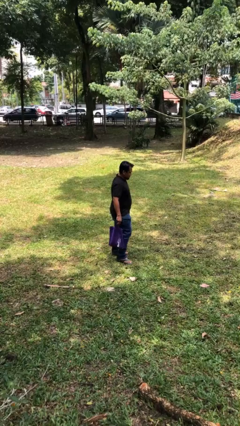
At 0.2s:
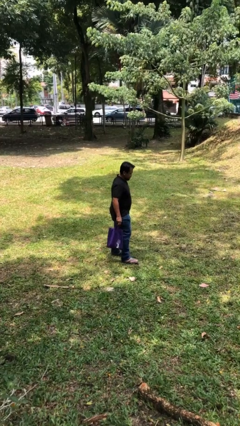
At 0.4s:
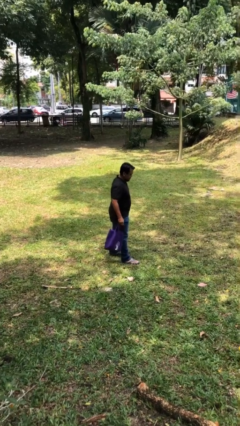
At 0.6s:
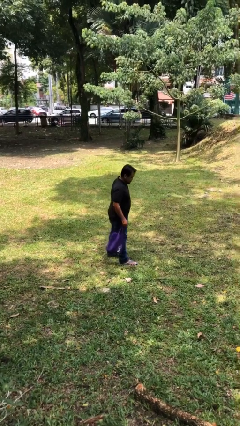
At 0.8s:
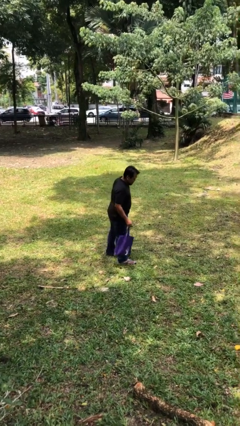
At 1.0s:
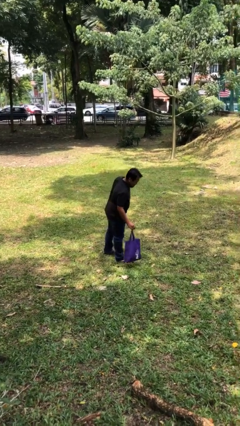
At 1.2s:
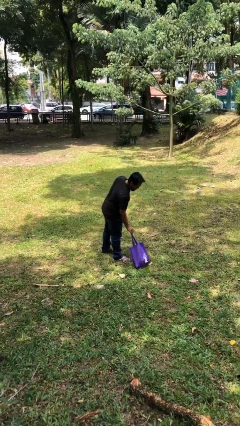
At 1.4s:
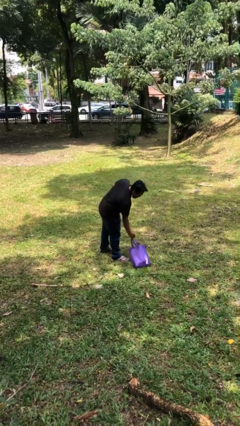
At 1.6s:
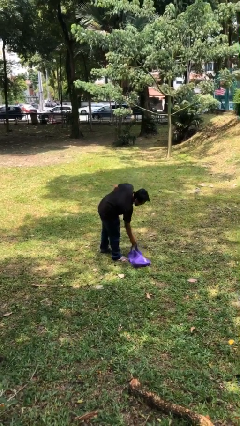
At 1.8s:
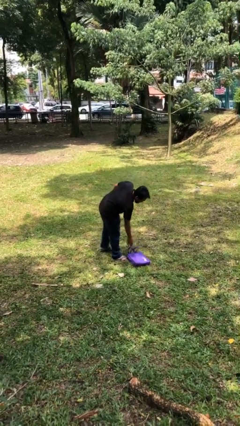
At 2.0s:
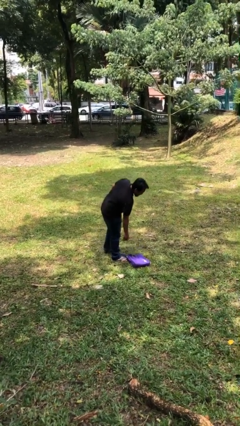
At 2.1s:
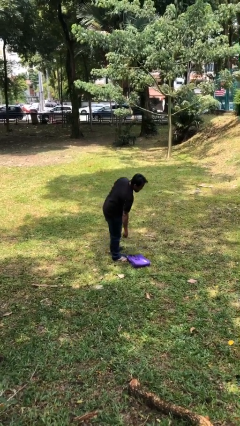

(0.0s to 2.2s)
person puts down object on floor

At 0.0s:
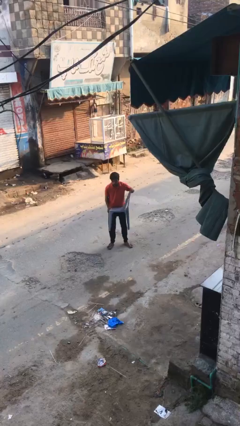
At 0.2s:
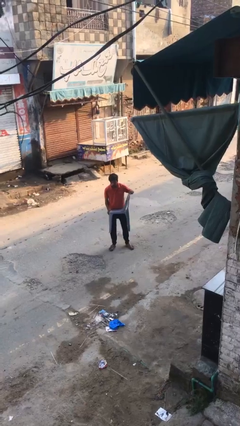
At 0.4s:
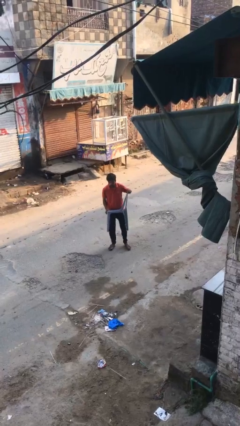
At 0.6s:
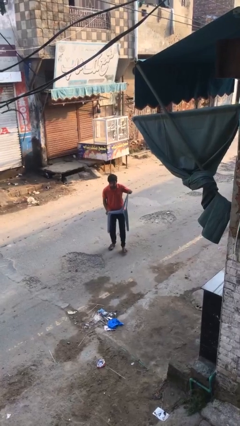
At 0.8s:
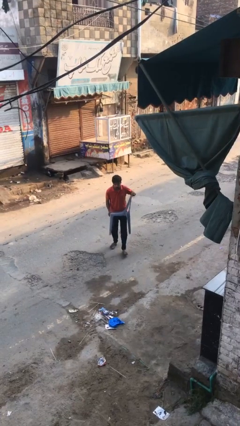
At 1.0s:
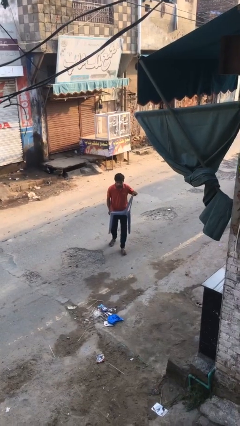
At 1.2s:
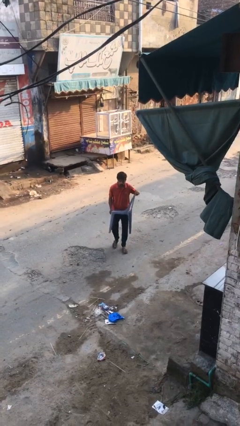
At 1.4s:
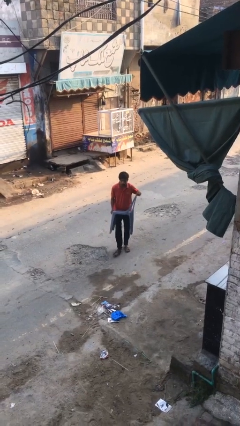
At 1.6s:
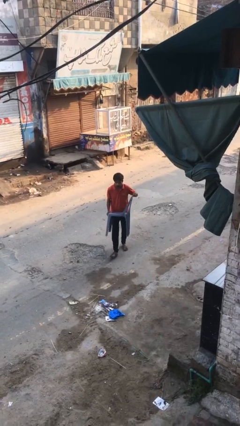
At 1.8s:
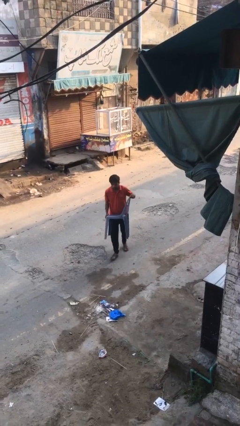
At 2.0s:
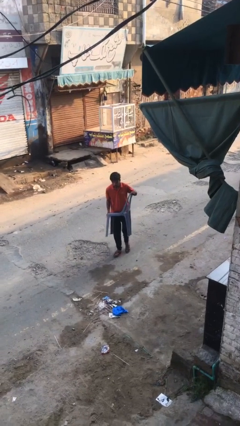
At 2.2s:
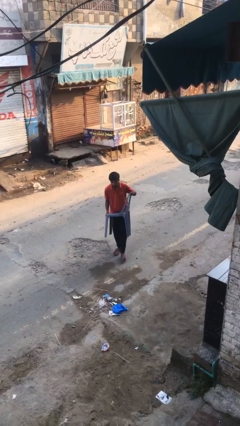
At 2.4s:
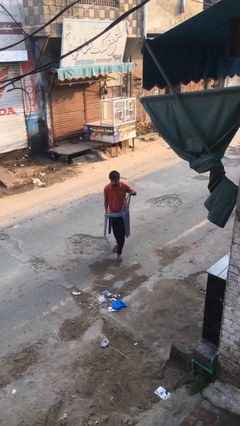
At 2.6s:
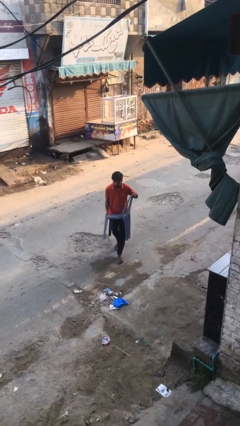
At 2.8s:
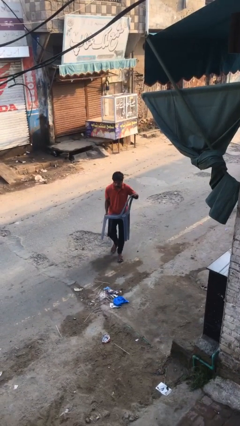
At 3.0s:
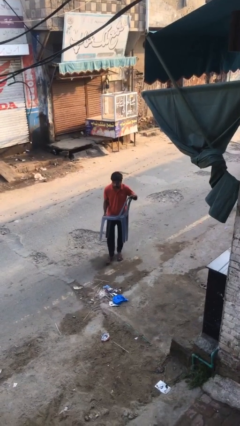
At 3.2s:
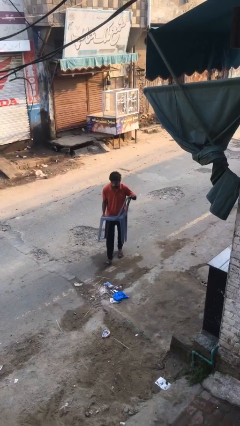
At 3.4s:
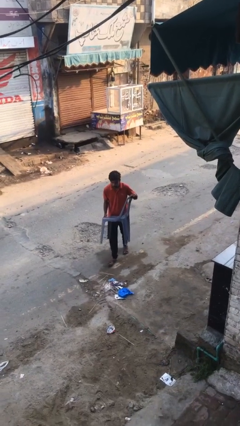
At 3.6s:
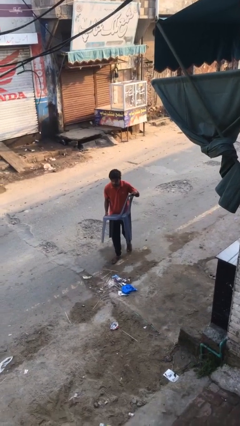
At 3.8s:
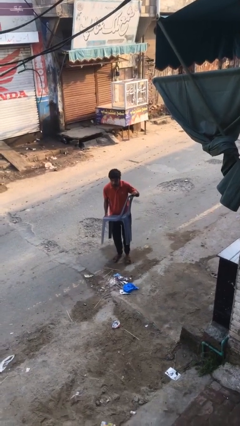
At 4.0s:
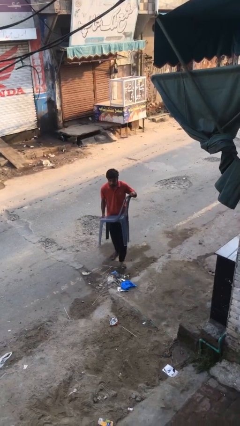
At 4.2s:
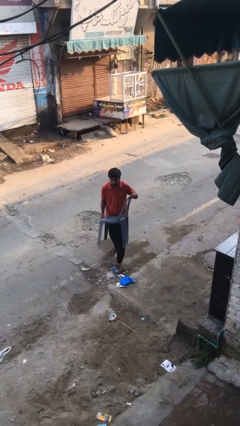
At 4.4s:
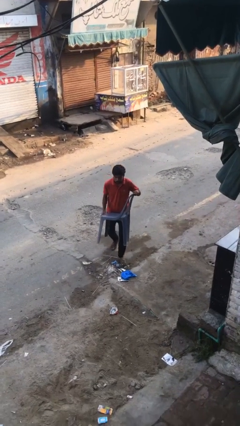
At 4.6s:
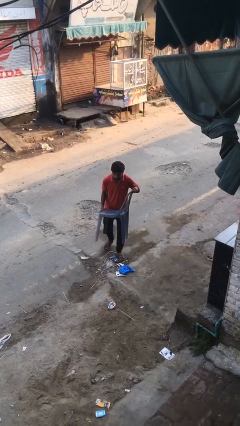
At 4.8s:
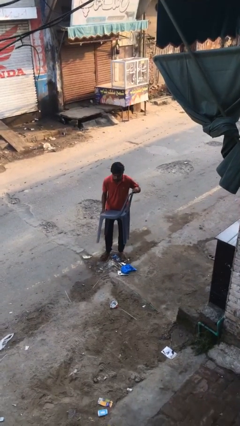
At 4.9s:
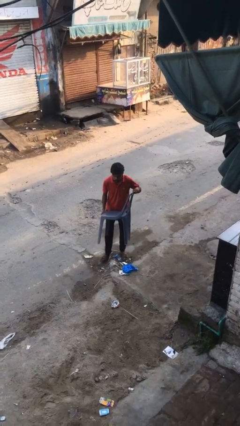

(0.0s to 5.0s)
person carries heavy object

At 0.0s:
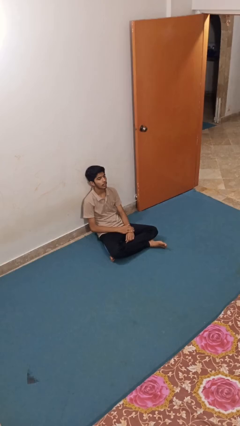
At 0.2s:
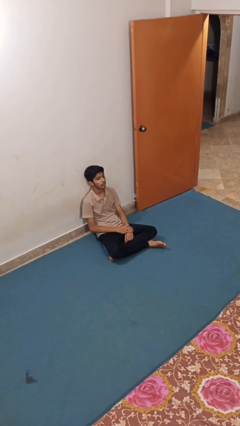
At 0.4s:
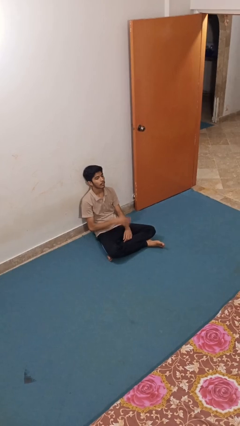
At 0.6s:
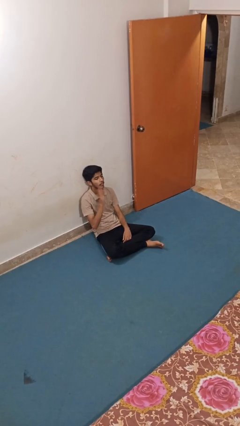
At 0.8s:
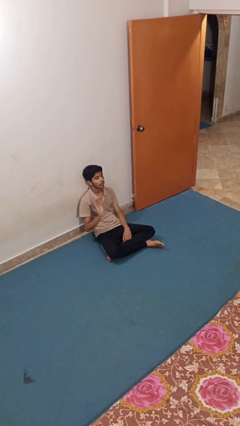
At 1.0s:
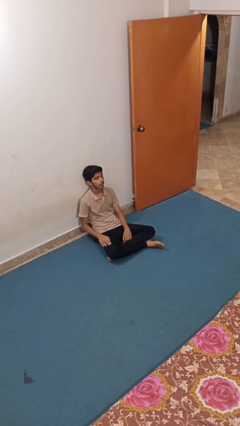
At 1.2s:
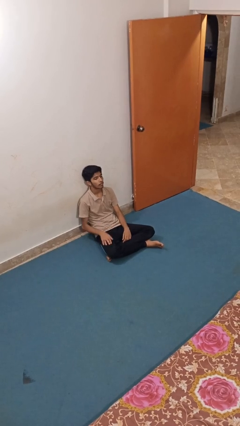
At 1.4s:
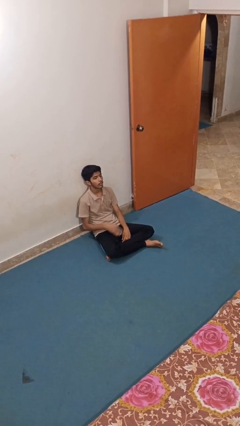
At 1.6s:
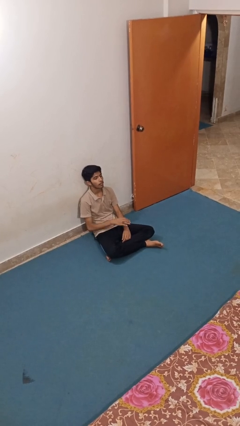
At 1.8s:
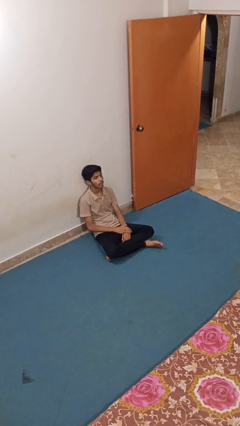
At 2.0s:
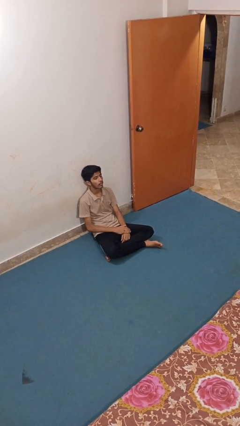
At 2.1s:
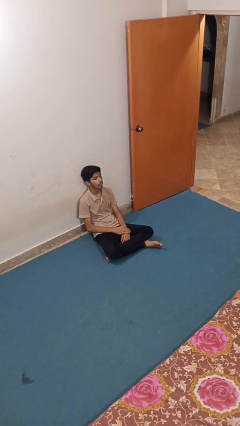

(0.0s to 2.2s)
person slaps hands on thighs

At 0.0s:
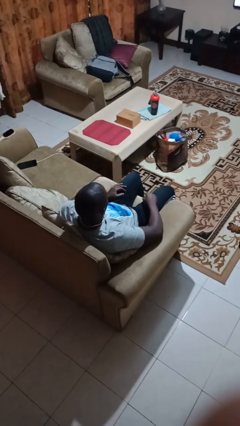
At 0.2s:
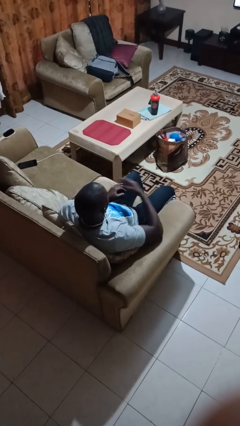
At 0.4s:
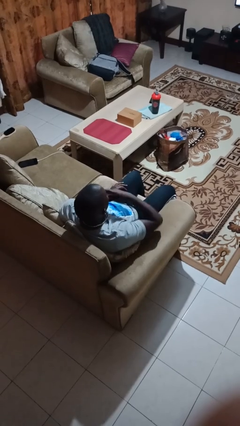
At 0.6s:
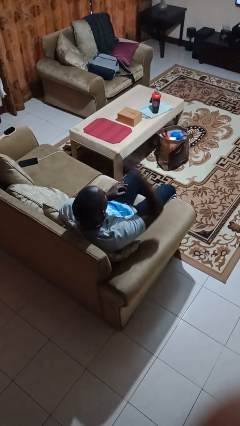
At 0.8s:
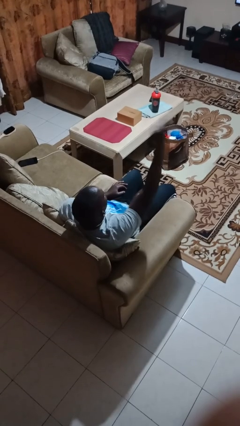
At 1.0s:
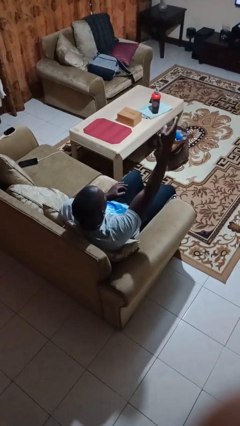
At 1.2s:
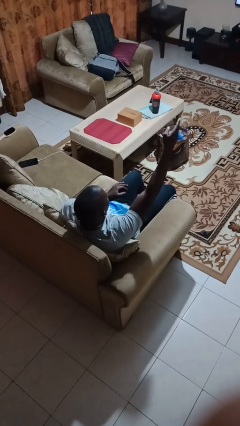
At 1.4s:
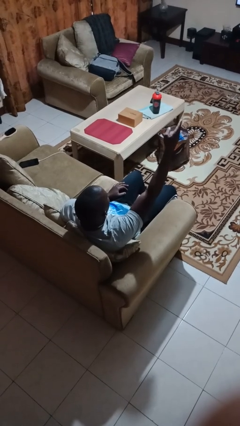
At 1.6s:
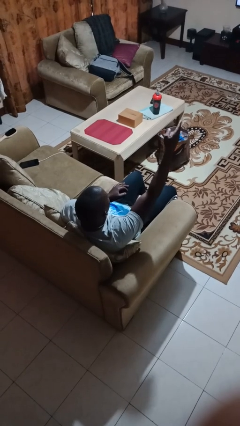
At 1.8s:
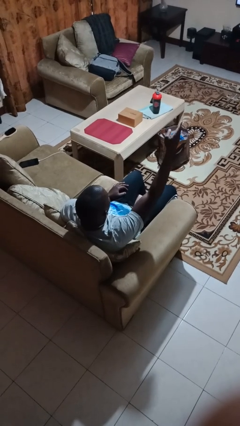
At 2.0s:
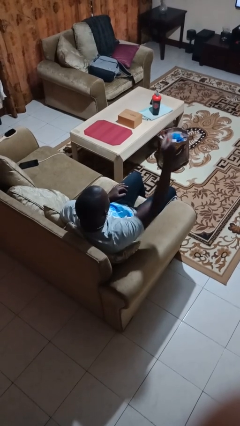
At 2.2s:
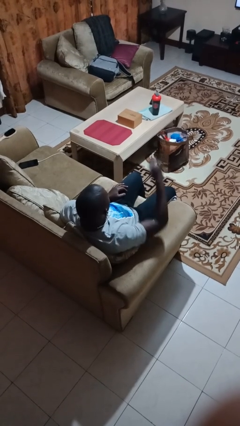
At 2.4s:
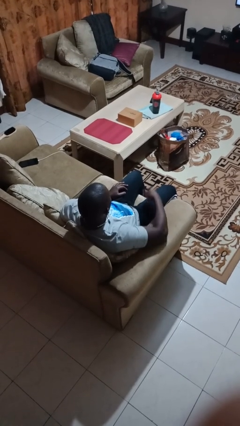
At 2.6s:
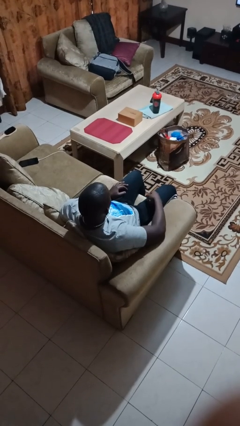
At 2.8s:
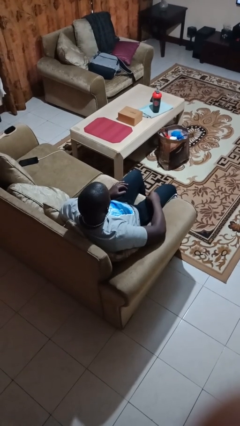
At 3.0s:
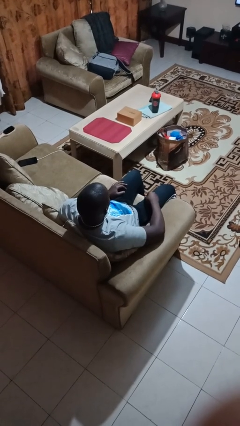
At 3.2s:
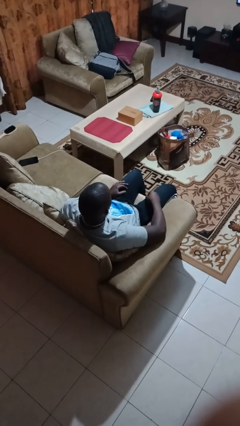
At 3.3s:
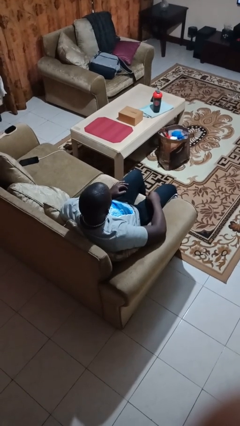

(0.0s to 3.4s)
person gestures blow kiss

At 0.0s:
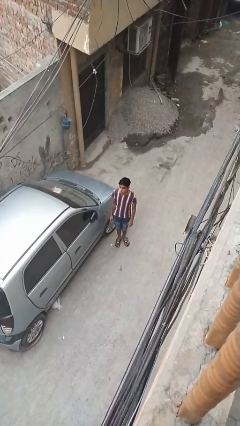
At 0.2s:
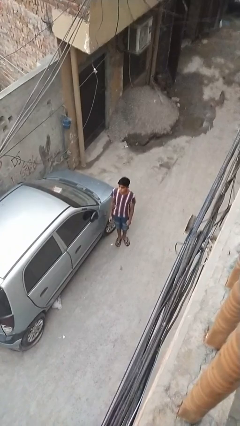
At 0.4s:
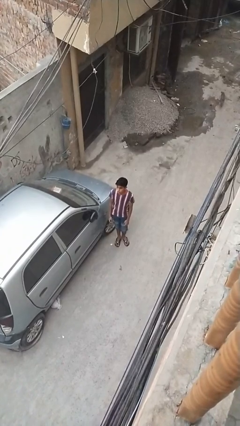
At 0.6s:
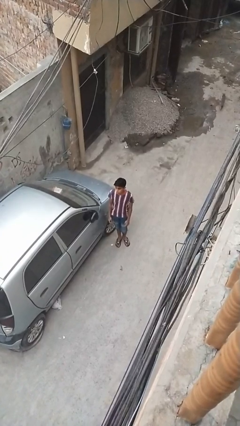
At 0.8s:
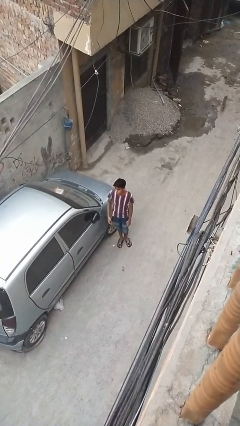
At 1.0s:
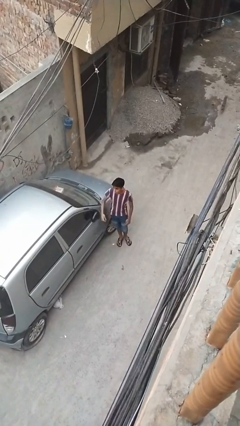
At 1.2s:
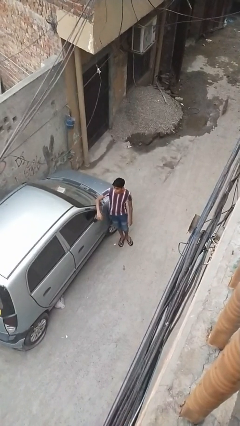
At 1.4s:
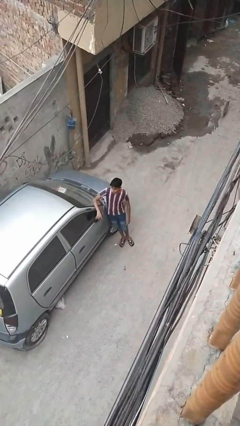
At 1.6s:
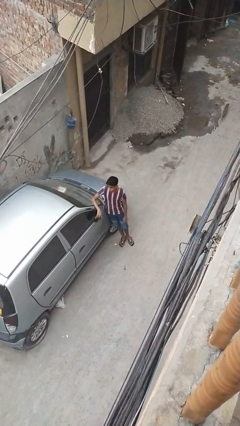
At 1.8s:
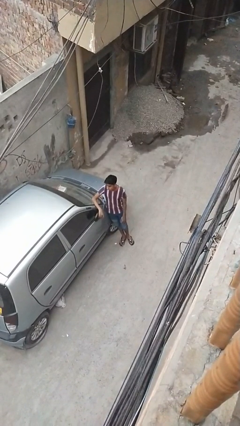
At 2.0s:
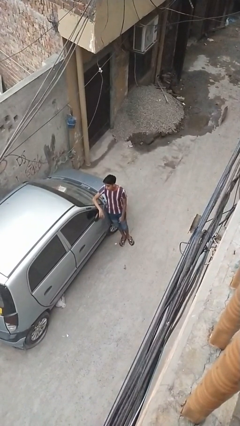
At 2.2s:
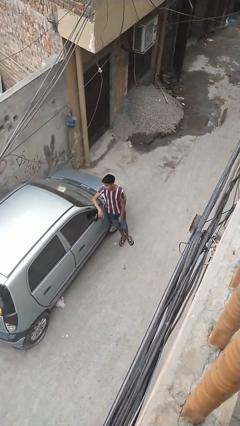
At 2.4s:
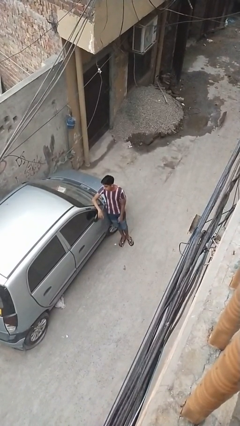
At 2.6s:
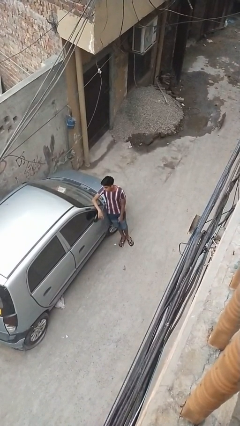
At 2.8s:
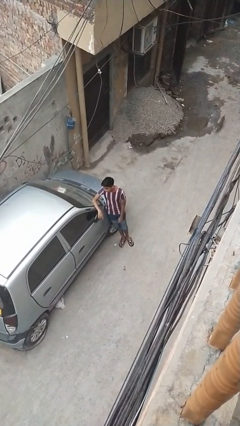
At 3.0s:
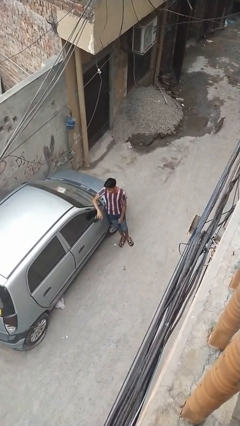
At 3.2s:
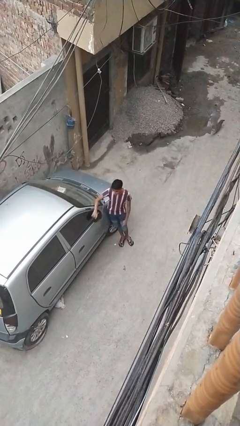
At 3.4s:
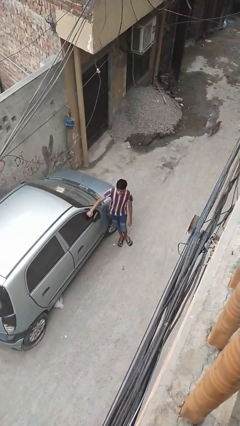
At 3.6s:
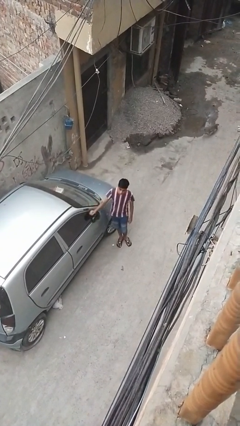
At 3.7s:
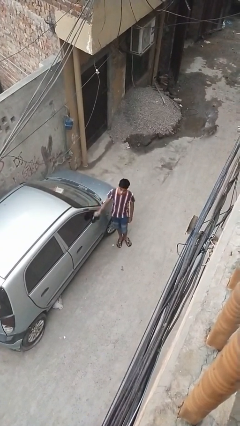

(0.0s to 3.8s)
person leans against car

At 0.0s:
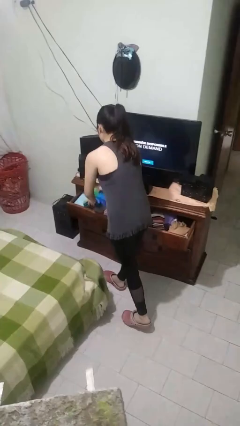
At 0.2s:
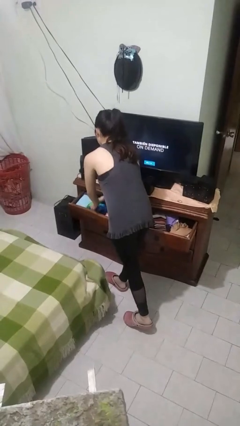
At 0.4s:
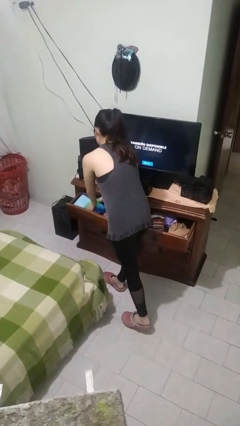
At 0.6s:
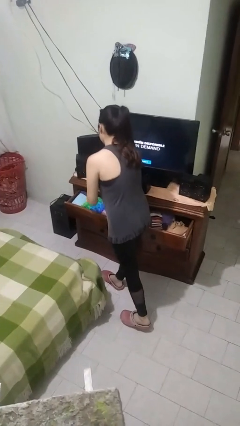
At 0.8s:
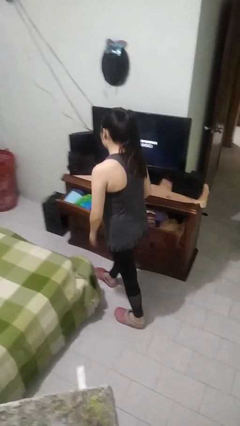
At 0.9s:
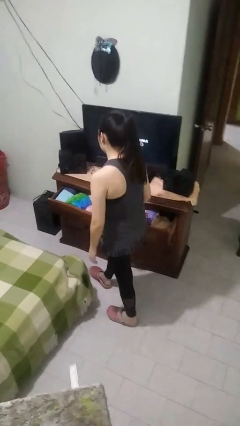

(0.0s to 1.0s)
person puts clothes into dresser
